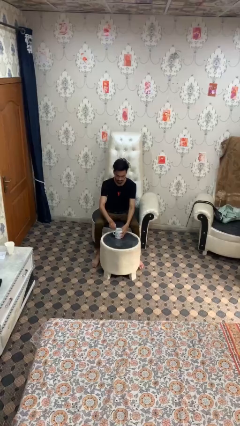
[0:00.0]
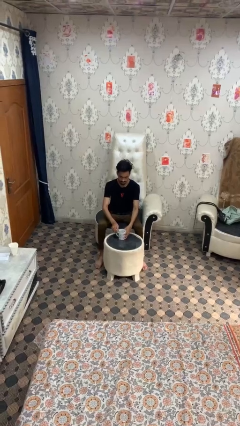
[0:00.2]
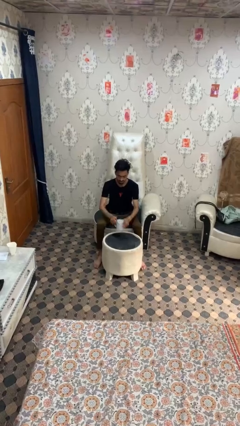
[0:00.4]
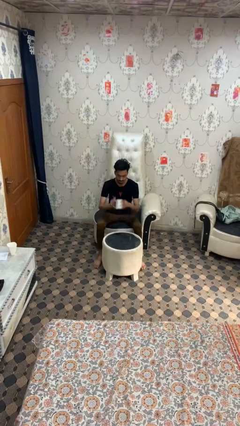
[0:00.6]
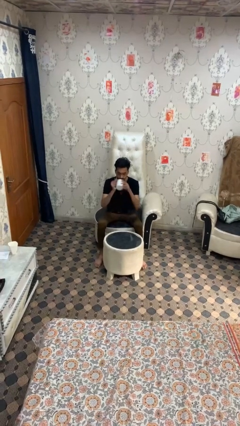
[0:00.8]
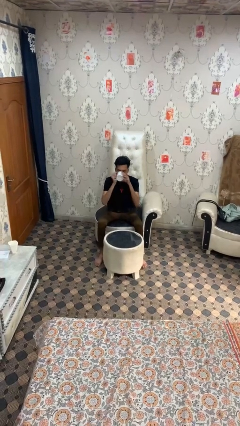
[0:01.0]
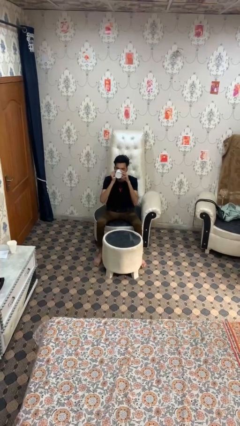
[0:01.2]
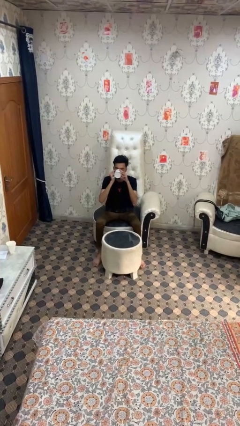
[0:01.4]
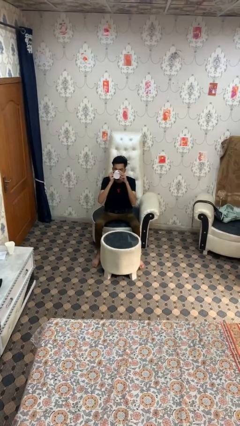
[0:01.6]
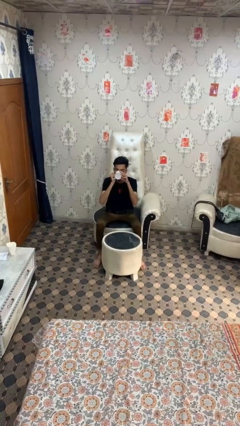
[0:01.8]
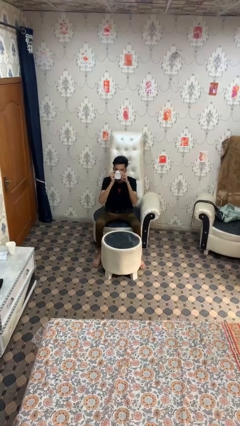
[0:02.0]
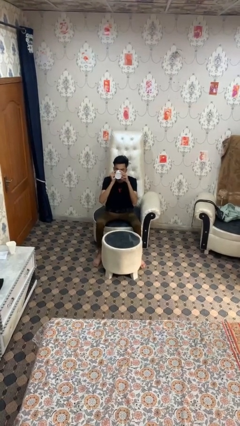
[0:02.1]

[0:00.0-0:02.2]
person drinks from mug

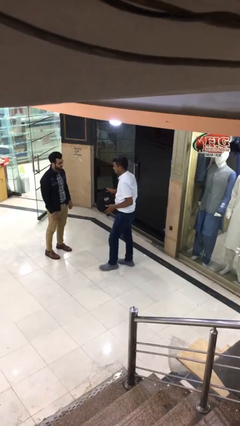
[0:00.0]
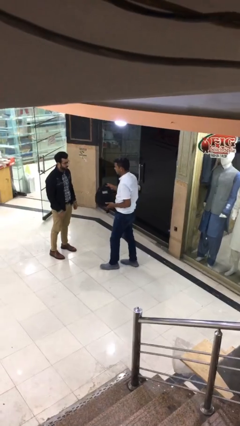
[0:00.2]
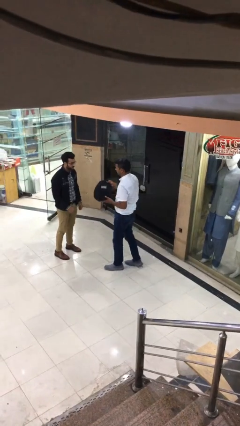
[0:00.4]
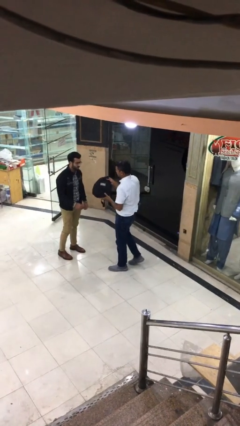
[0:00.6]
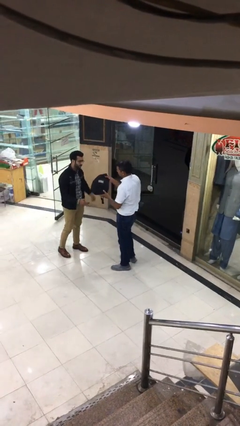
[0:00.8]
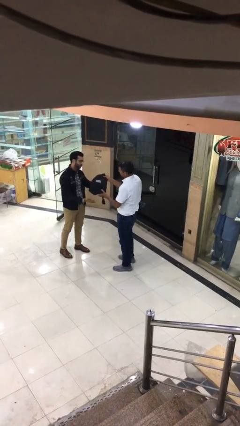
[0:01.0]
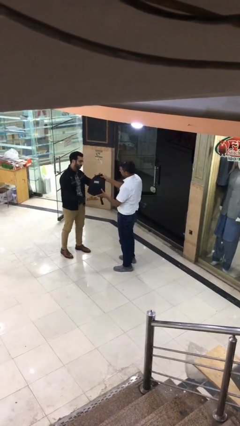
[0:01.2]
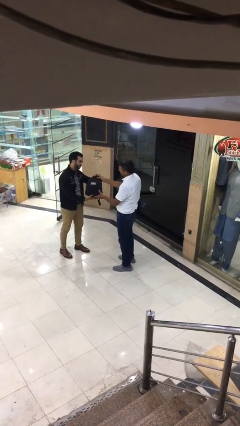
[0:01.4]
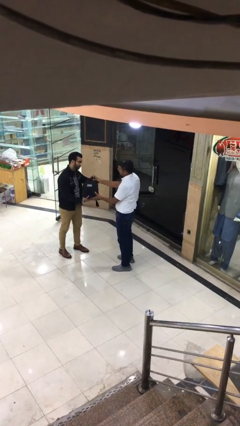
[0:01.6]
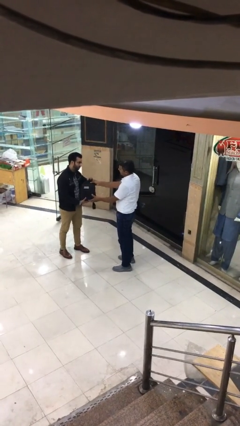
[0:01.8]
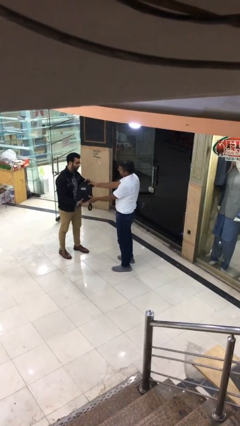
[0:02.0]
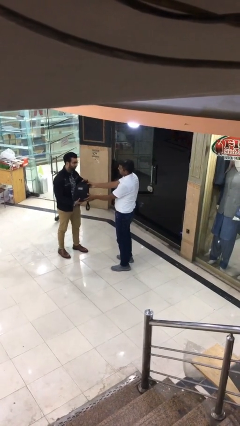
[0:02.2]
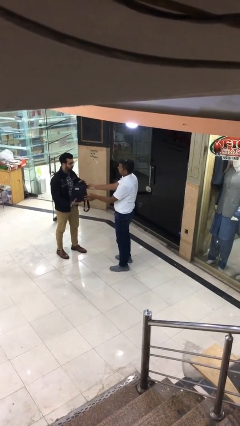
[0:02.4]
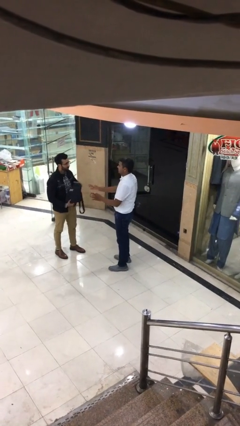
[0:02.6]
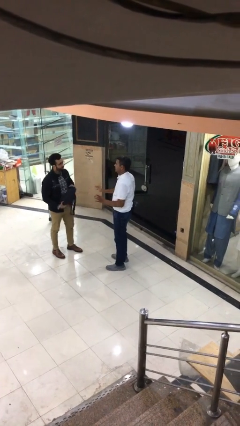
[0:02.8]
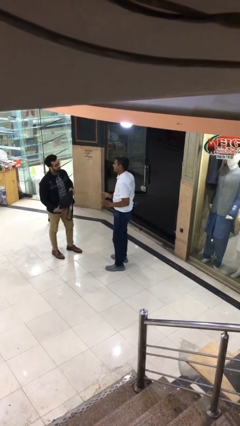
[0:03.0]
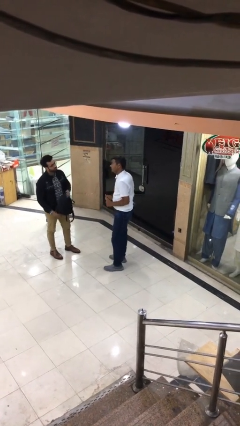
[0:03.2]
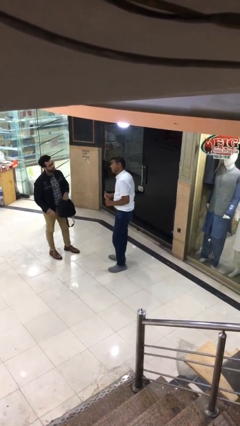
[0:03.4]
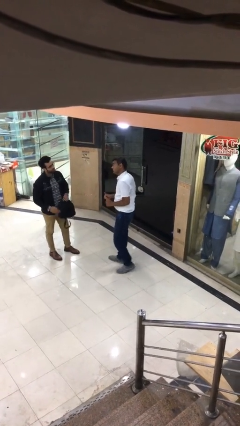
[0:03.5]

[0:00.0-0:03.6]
person transfers object to person

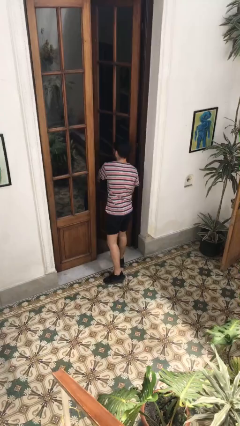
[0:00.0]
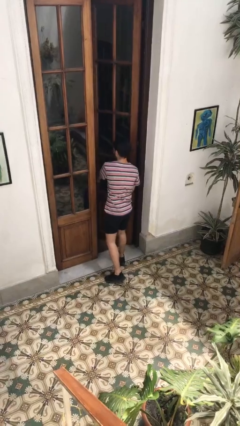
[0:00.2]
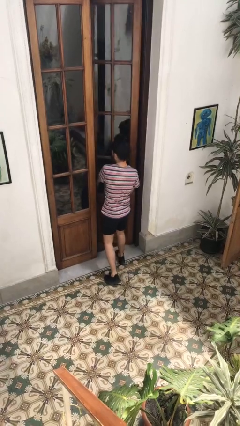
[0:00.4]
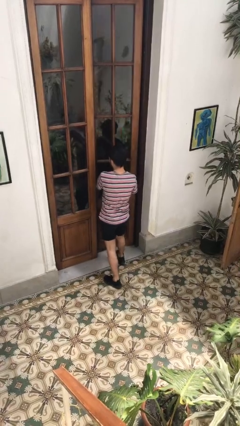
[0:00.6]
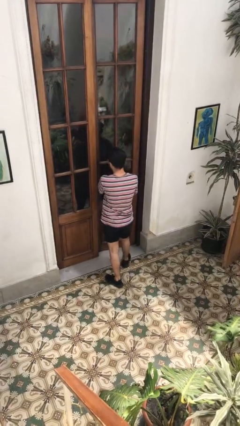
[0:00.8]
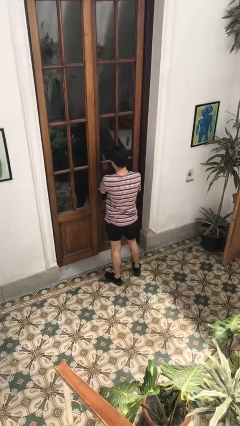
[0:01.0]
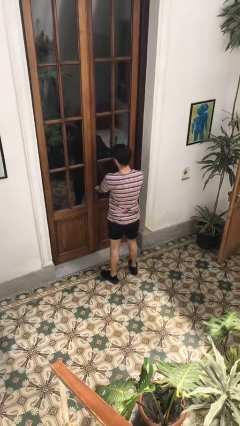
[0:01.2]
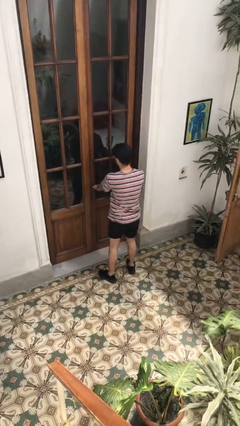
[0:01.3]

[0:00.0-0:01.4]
person closes facility door

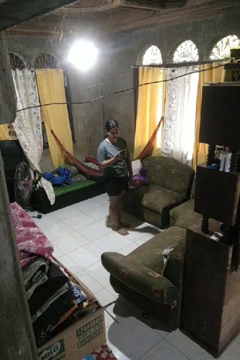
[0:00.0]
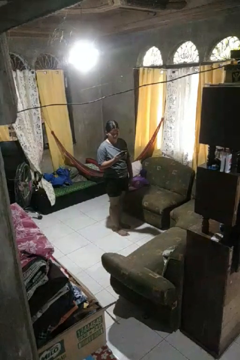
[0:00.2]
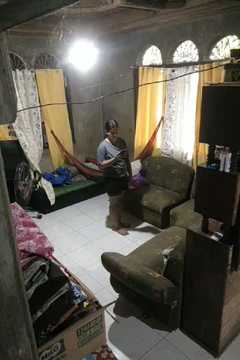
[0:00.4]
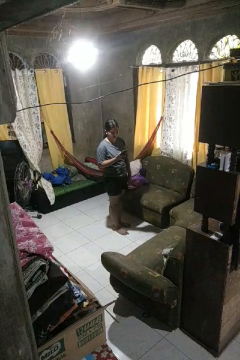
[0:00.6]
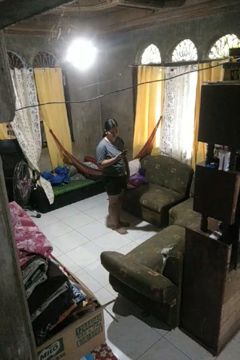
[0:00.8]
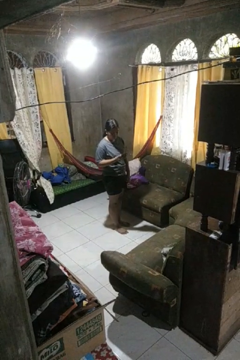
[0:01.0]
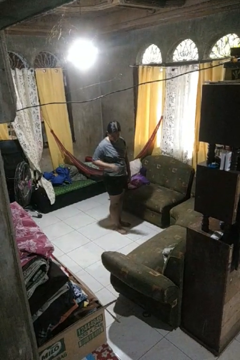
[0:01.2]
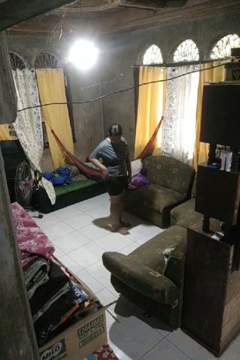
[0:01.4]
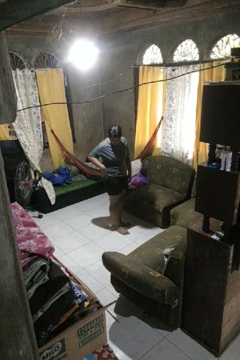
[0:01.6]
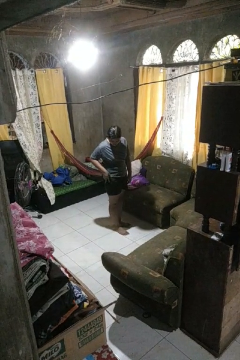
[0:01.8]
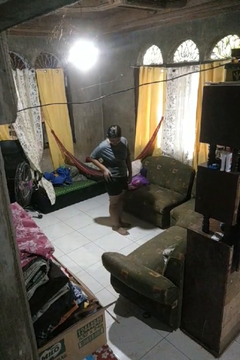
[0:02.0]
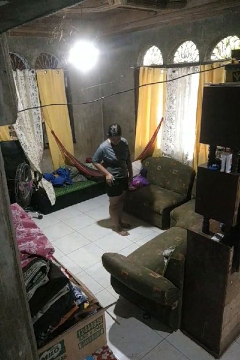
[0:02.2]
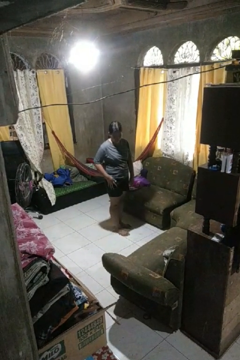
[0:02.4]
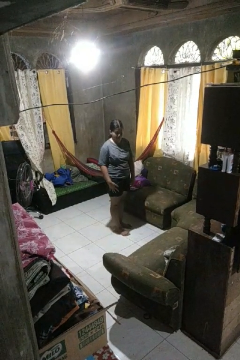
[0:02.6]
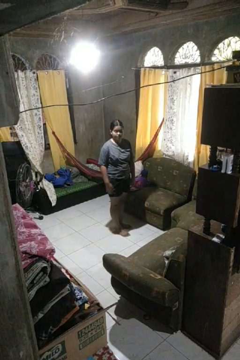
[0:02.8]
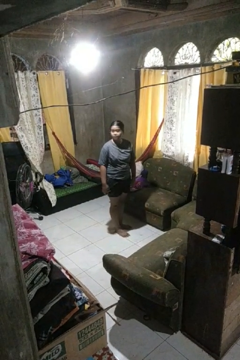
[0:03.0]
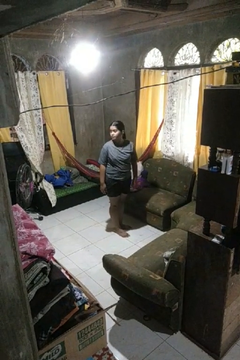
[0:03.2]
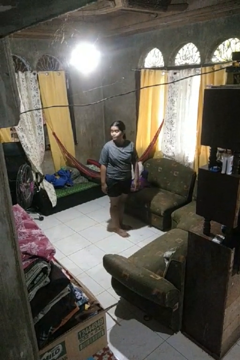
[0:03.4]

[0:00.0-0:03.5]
person puts phone into pocket

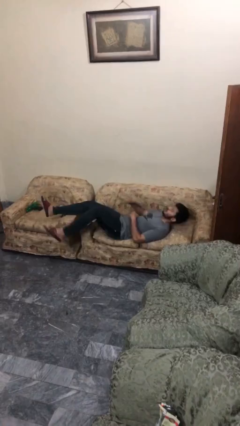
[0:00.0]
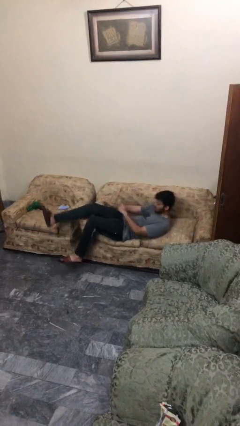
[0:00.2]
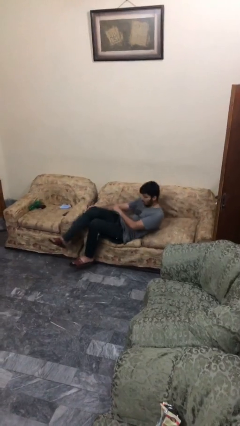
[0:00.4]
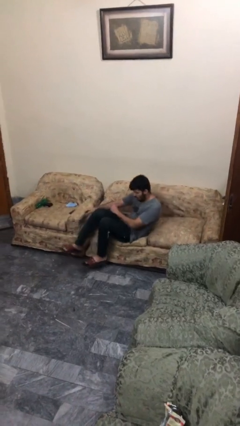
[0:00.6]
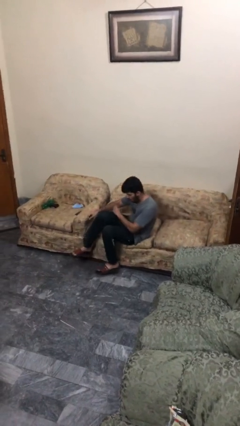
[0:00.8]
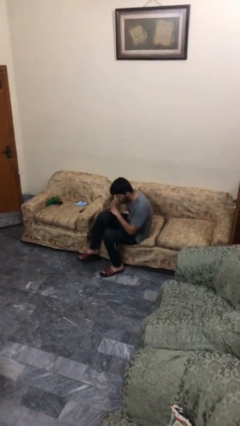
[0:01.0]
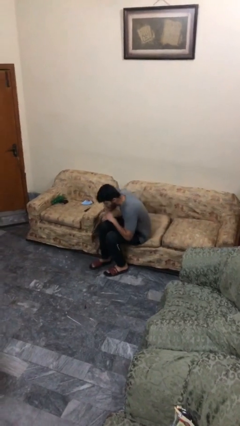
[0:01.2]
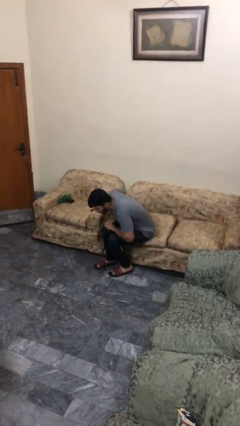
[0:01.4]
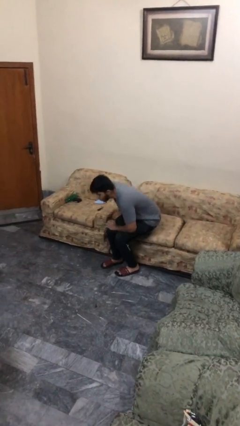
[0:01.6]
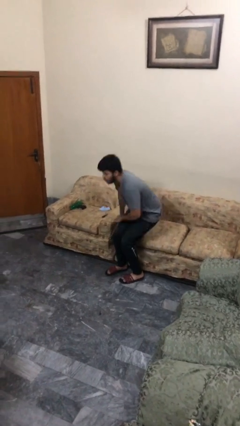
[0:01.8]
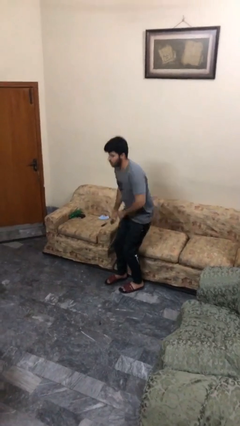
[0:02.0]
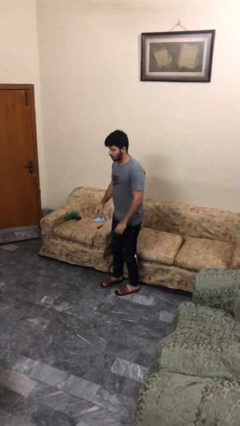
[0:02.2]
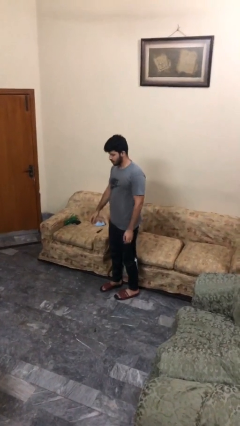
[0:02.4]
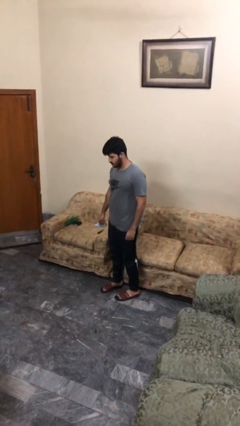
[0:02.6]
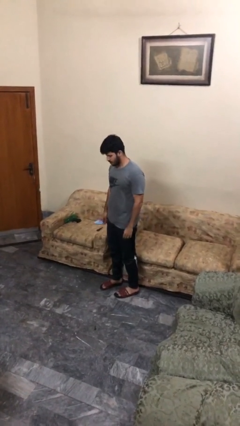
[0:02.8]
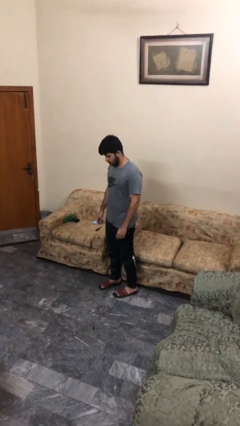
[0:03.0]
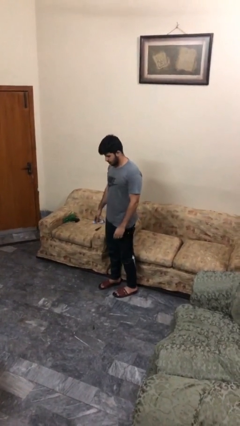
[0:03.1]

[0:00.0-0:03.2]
person stands up

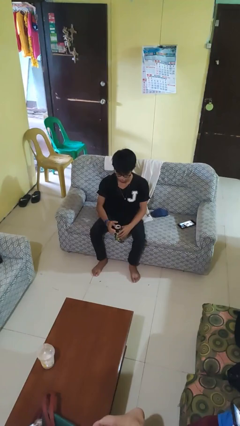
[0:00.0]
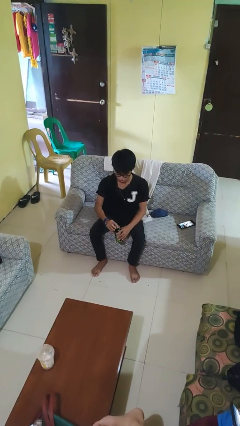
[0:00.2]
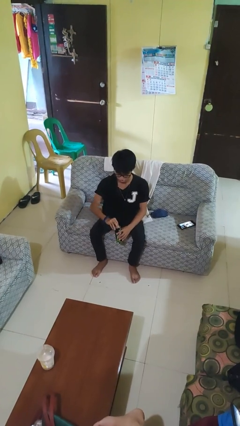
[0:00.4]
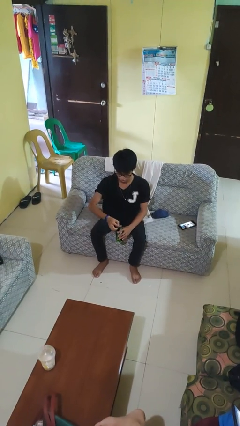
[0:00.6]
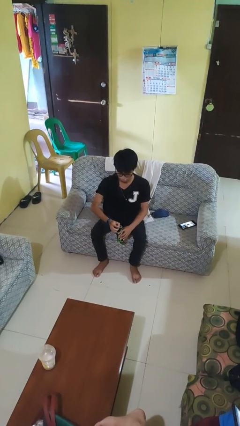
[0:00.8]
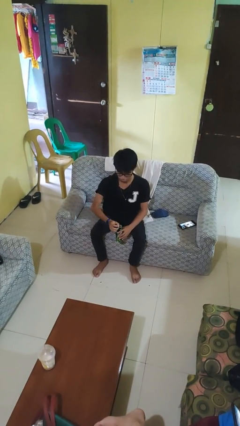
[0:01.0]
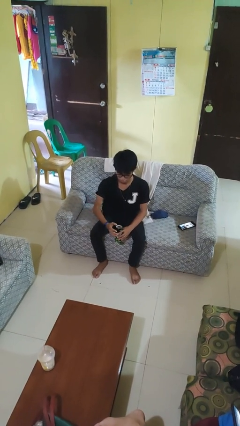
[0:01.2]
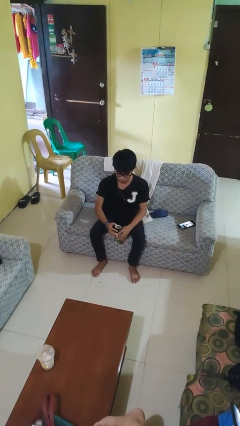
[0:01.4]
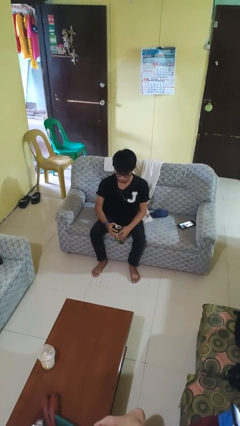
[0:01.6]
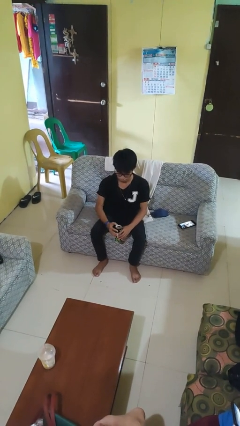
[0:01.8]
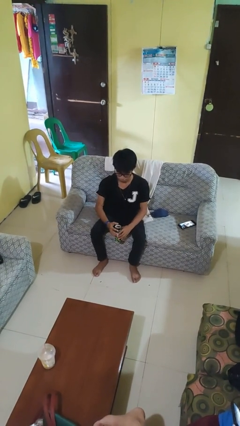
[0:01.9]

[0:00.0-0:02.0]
person opens beverage can

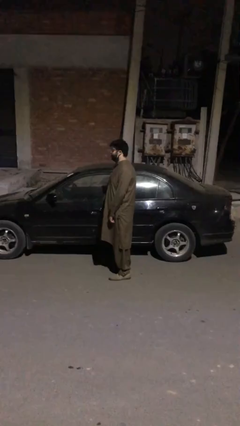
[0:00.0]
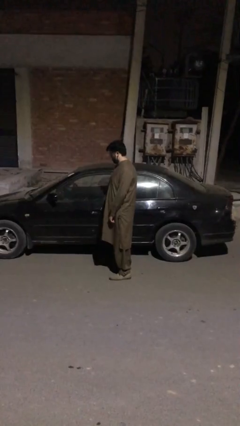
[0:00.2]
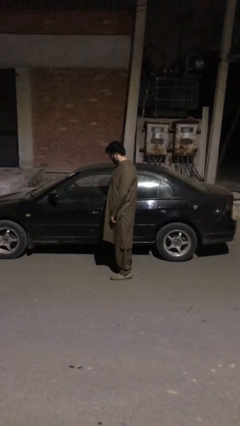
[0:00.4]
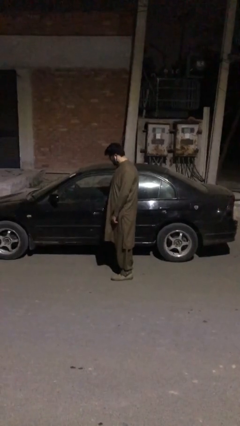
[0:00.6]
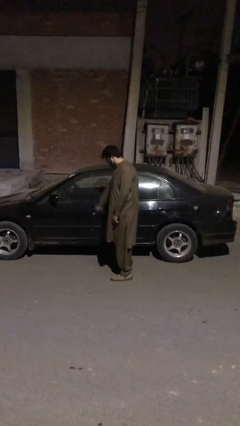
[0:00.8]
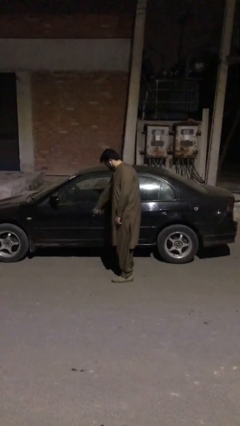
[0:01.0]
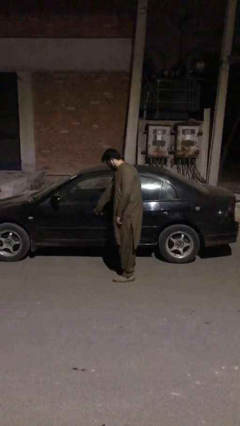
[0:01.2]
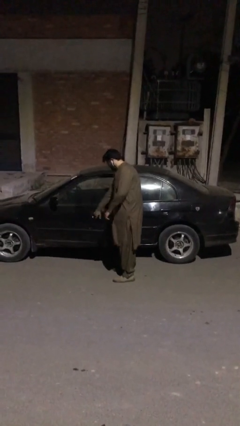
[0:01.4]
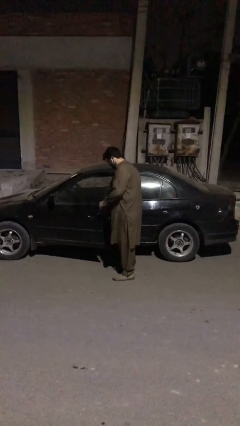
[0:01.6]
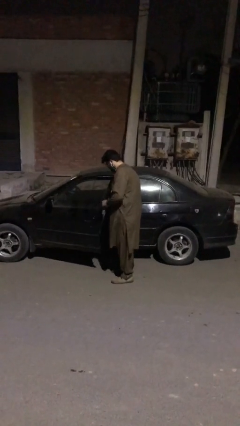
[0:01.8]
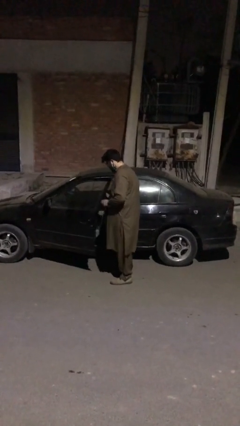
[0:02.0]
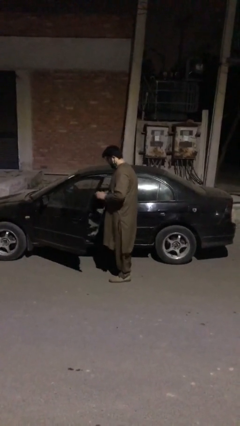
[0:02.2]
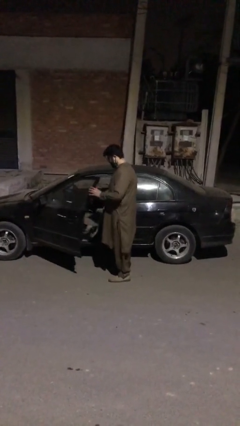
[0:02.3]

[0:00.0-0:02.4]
person opens car door
